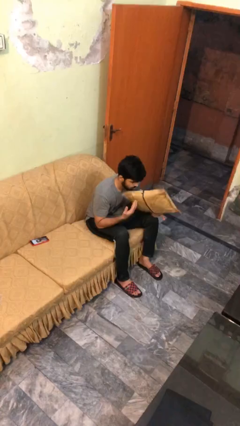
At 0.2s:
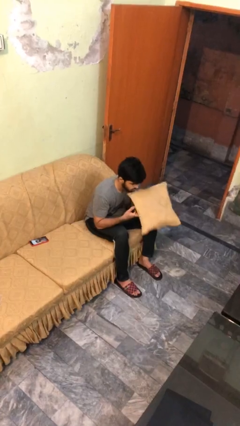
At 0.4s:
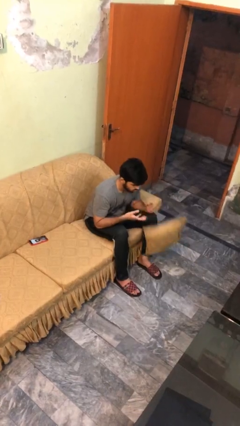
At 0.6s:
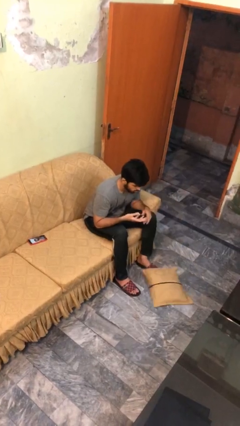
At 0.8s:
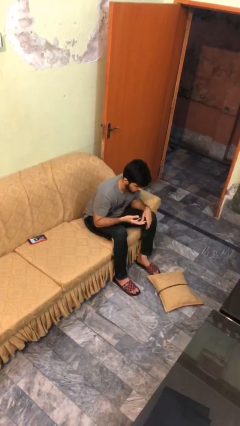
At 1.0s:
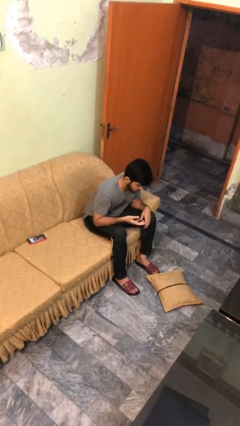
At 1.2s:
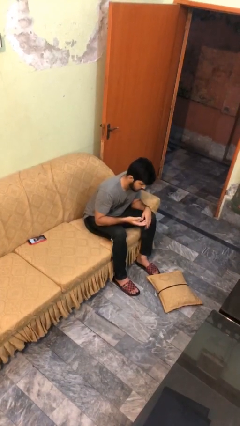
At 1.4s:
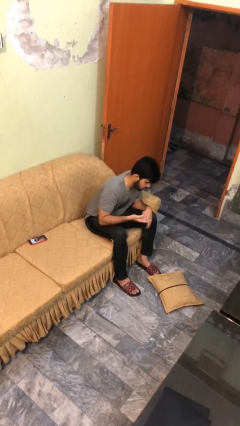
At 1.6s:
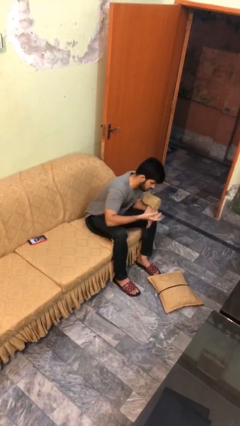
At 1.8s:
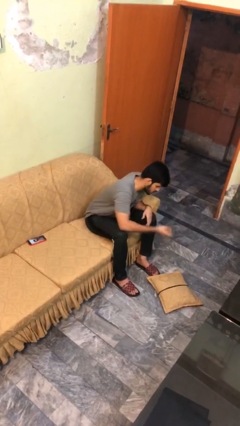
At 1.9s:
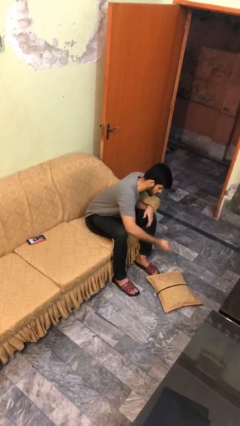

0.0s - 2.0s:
person drops object

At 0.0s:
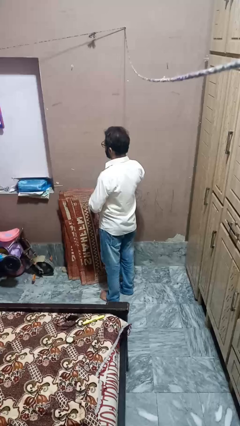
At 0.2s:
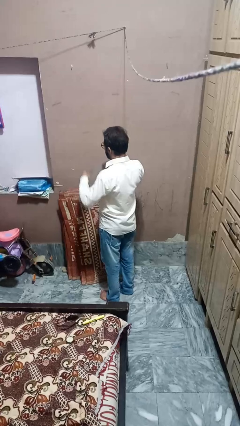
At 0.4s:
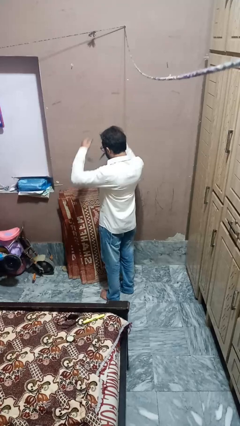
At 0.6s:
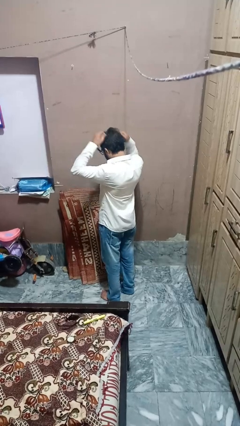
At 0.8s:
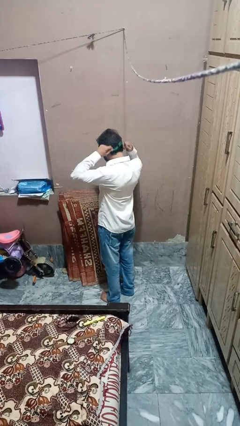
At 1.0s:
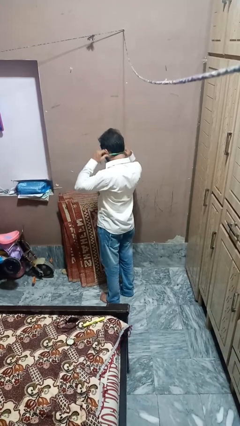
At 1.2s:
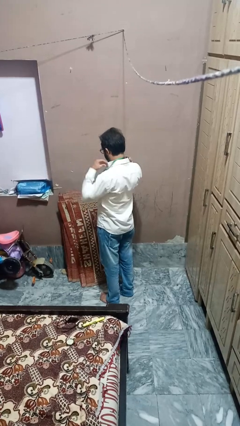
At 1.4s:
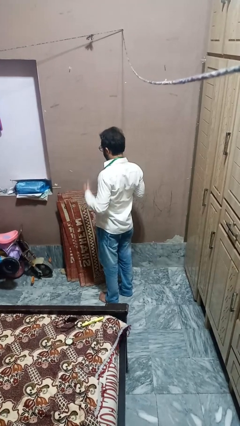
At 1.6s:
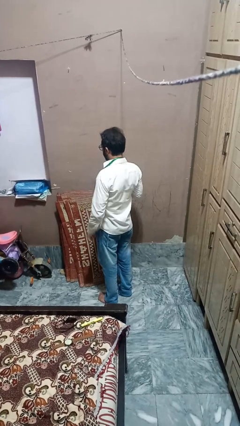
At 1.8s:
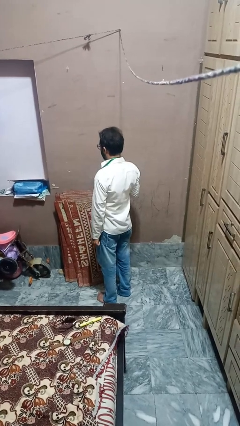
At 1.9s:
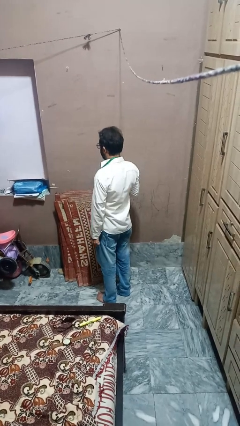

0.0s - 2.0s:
person puts on necklace

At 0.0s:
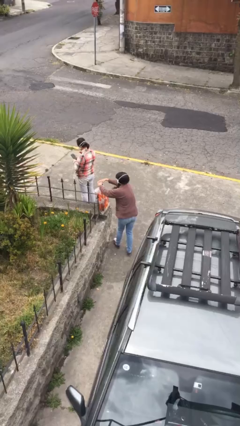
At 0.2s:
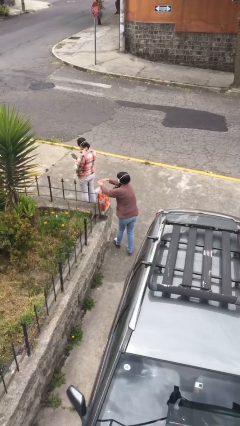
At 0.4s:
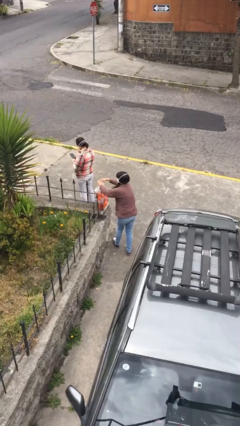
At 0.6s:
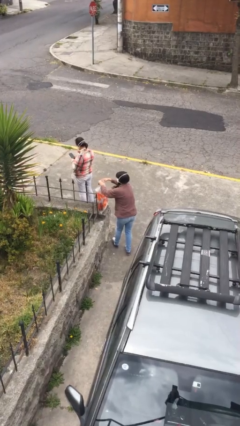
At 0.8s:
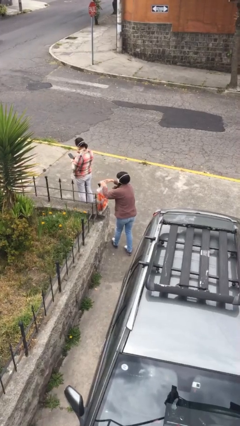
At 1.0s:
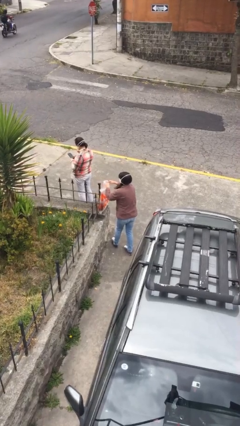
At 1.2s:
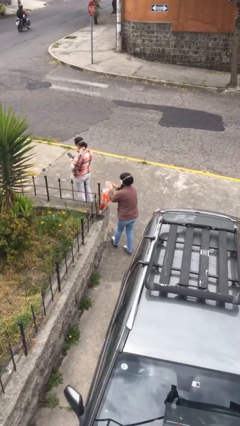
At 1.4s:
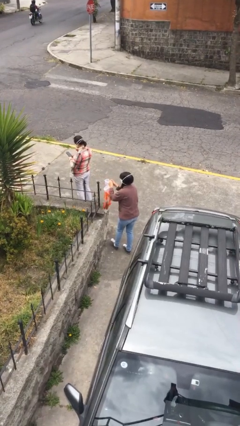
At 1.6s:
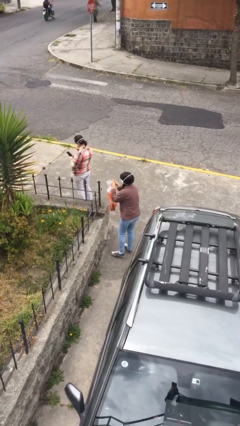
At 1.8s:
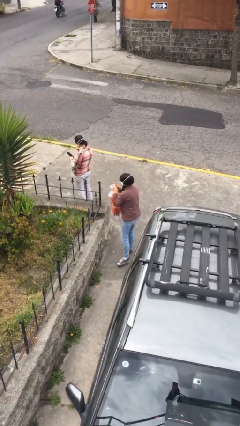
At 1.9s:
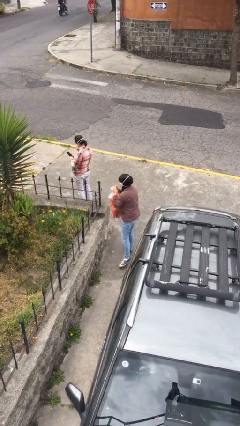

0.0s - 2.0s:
person steals object from person

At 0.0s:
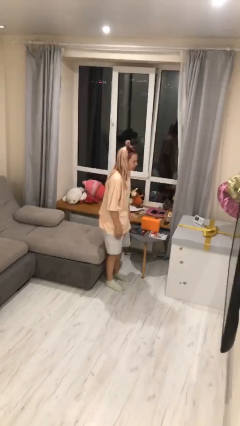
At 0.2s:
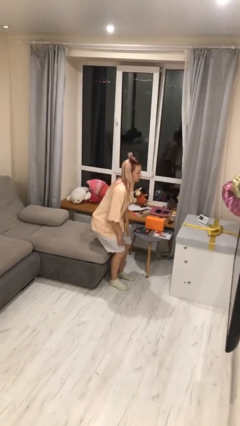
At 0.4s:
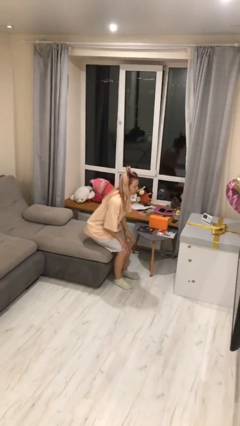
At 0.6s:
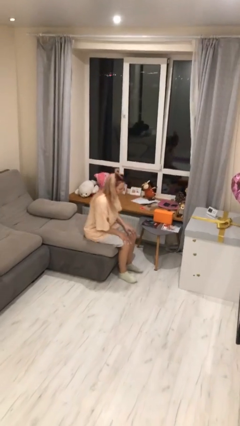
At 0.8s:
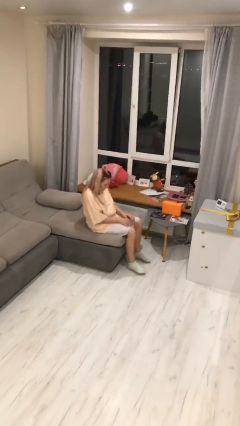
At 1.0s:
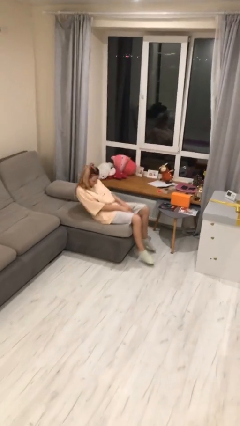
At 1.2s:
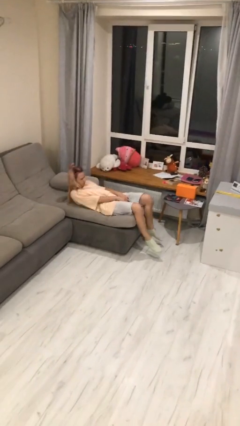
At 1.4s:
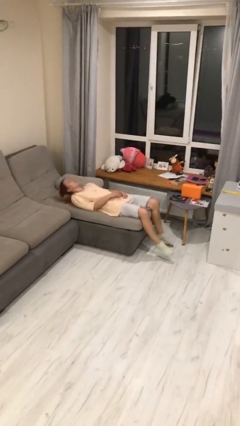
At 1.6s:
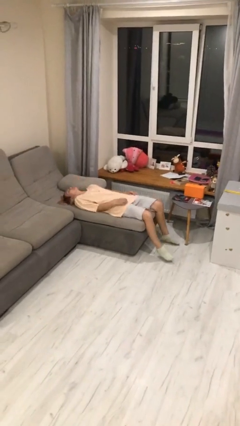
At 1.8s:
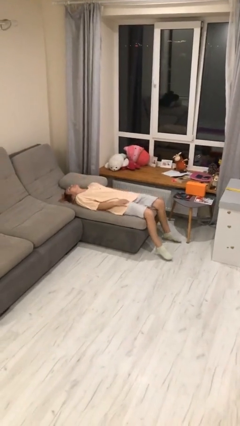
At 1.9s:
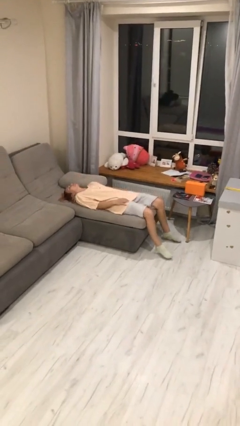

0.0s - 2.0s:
person lies down on couch

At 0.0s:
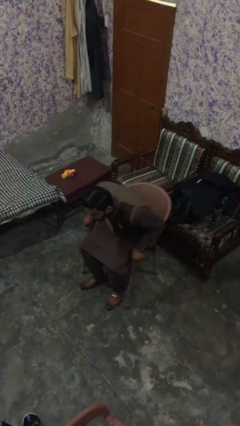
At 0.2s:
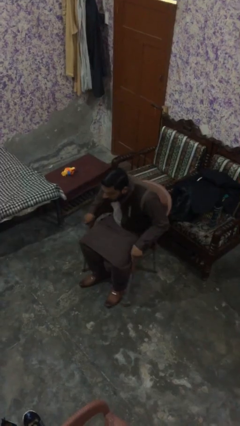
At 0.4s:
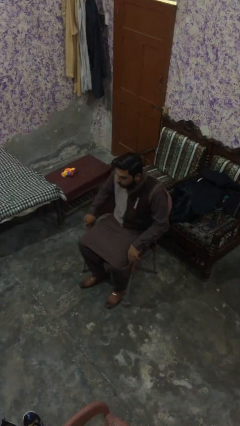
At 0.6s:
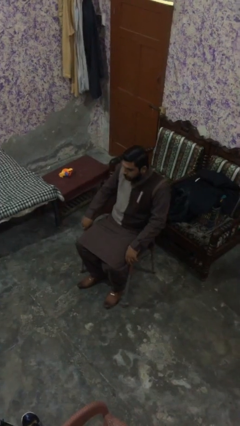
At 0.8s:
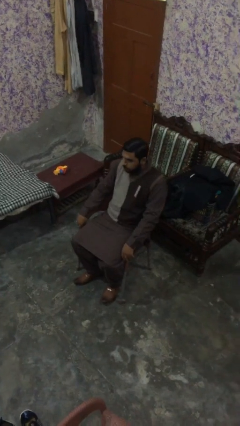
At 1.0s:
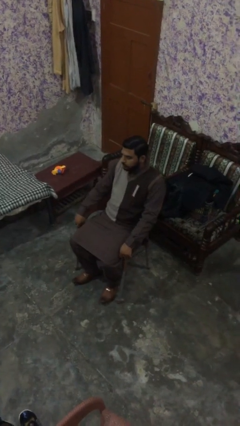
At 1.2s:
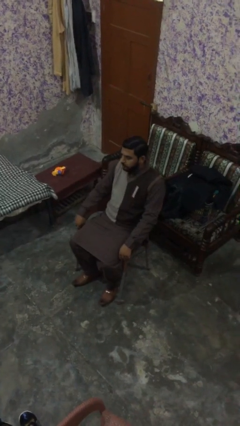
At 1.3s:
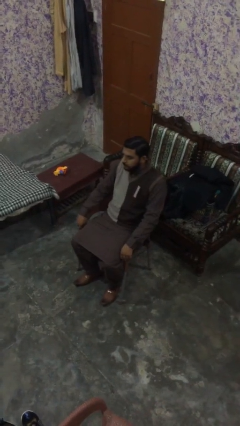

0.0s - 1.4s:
person sits down

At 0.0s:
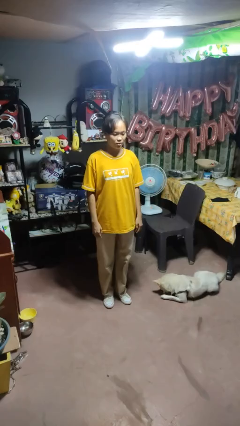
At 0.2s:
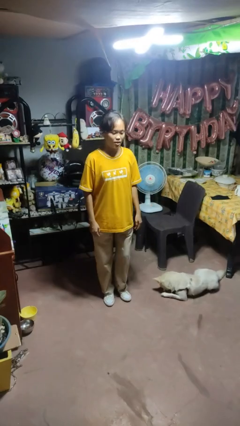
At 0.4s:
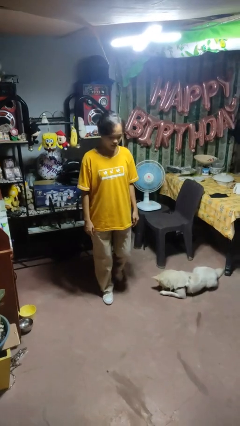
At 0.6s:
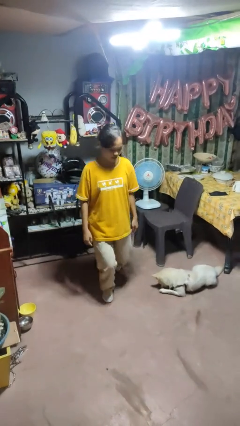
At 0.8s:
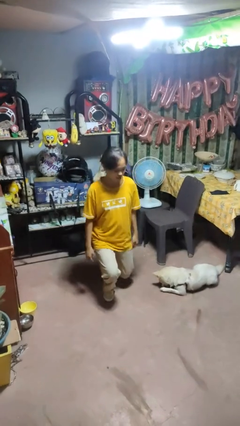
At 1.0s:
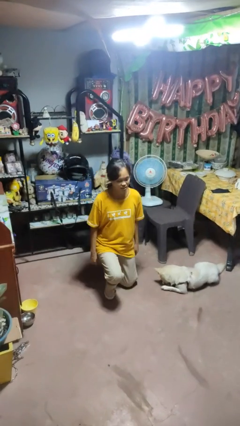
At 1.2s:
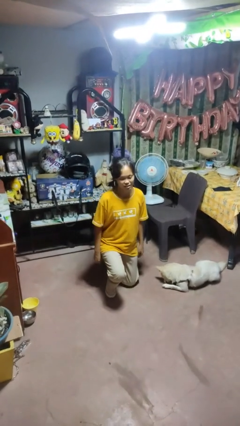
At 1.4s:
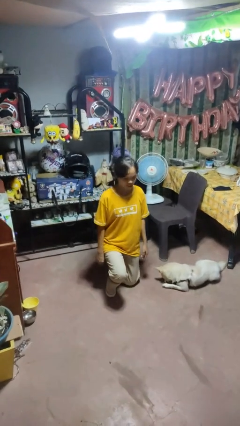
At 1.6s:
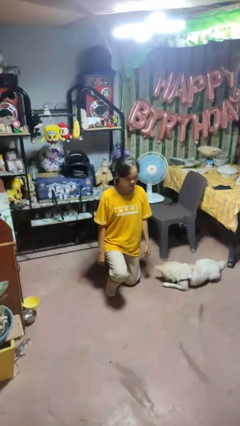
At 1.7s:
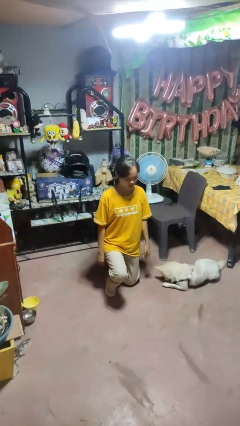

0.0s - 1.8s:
person kneels

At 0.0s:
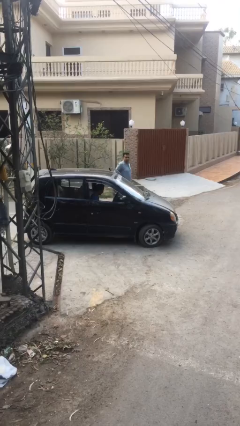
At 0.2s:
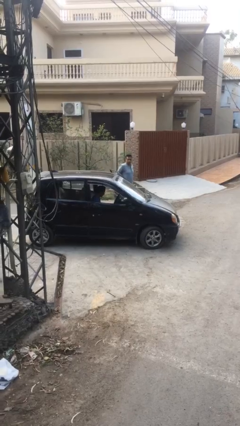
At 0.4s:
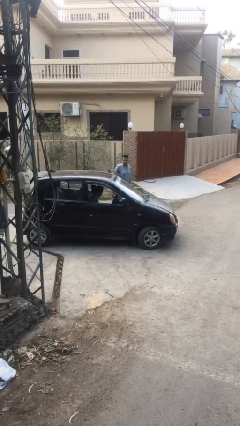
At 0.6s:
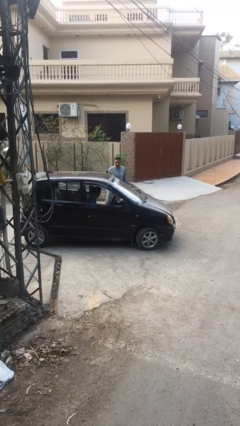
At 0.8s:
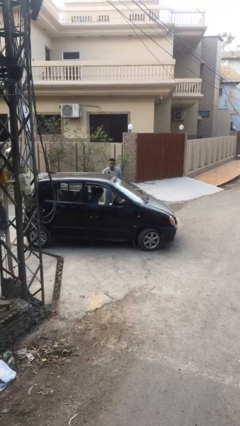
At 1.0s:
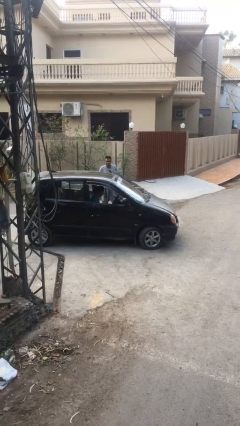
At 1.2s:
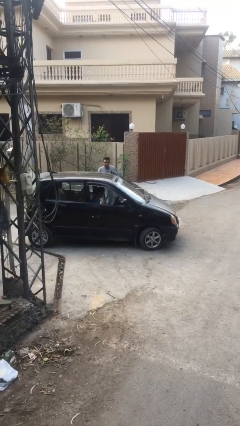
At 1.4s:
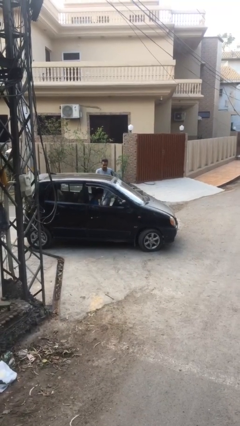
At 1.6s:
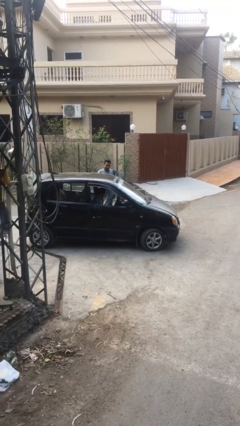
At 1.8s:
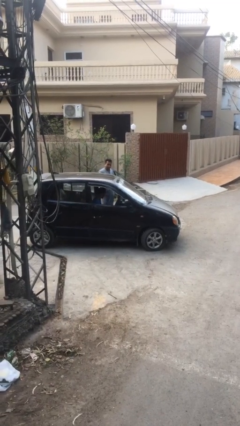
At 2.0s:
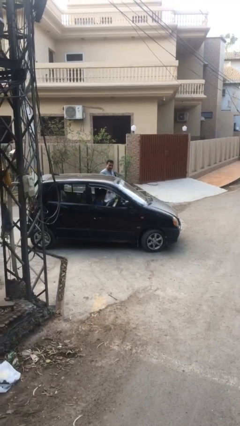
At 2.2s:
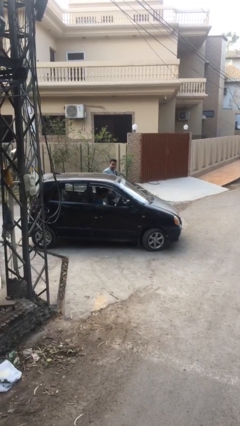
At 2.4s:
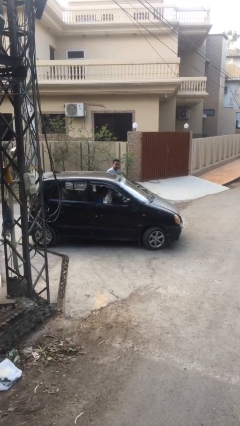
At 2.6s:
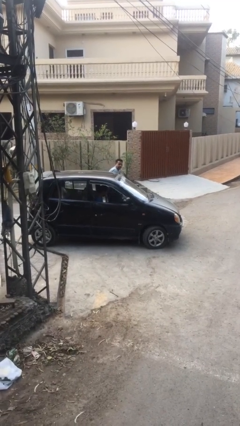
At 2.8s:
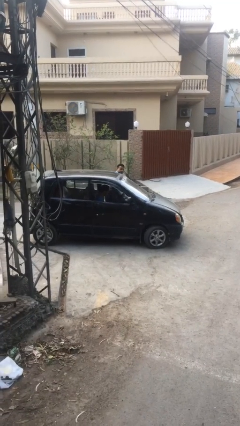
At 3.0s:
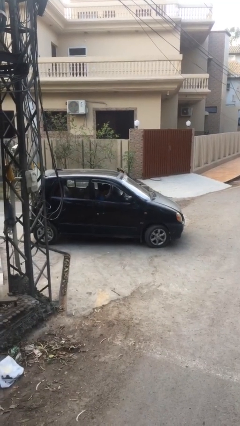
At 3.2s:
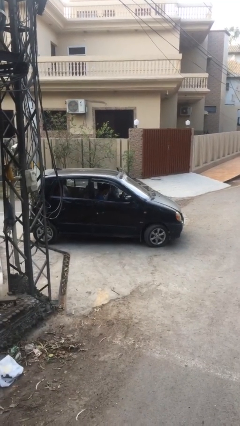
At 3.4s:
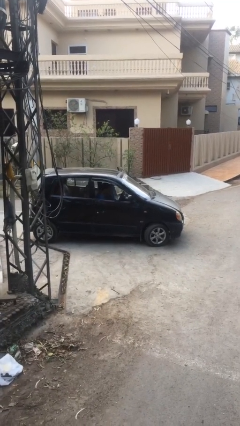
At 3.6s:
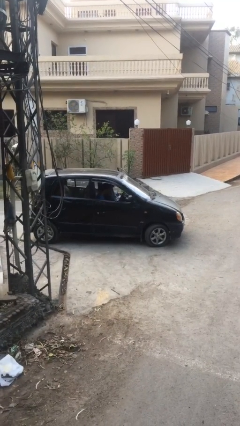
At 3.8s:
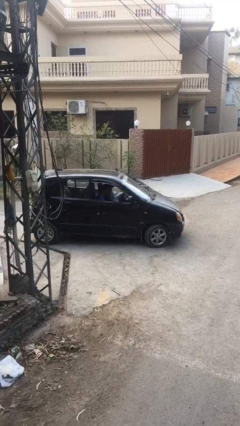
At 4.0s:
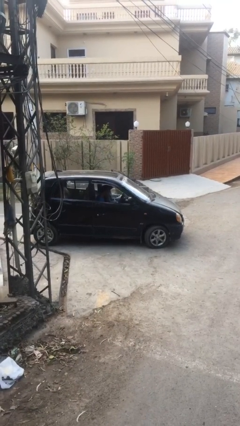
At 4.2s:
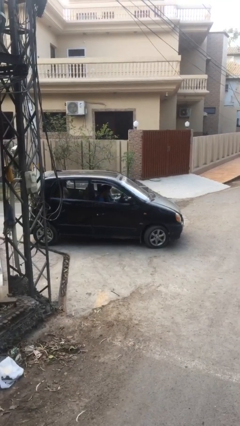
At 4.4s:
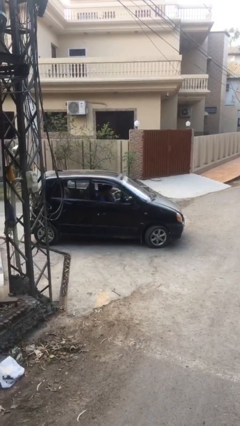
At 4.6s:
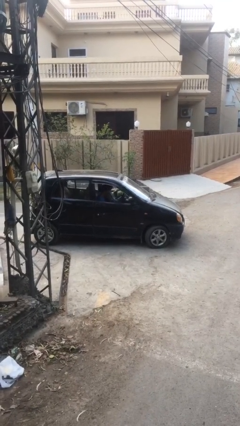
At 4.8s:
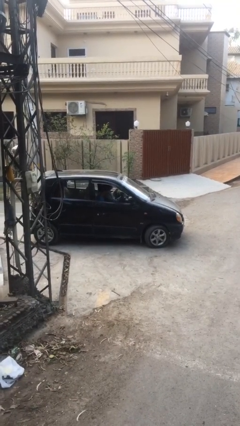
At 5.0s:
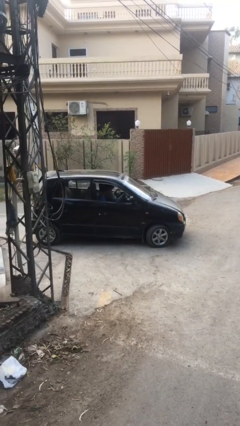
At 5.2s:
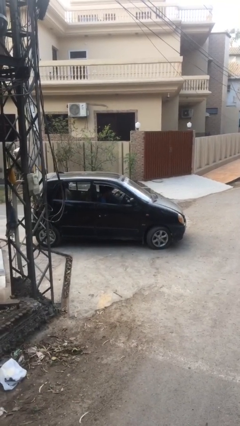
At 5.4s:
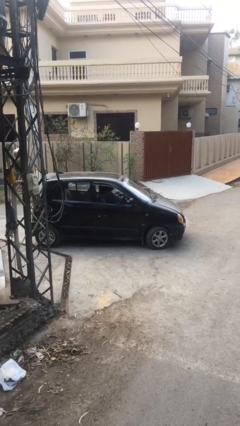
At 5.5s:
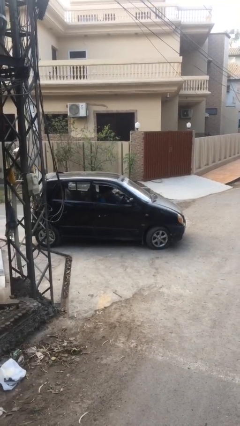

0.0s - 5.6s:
car picks up person

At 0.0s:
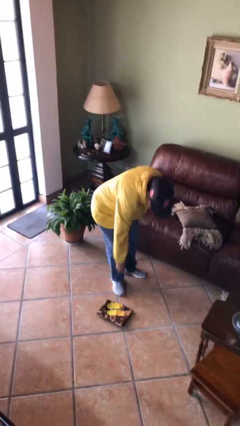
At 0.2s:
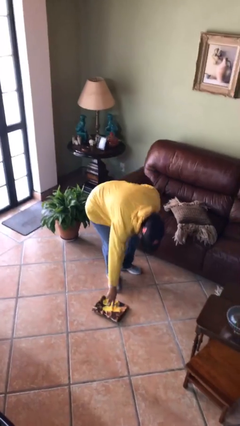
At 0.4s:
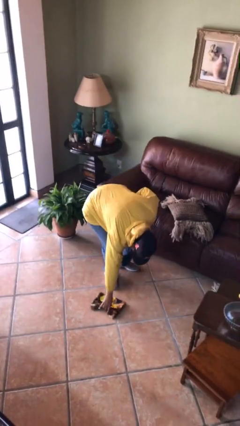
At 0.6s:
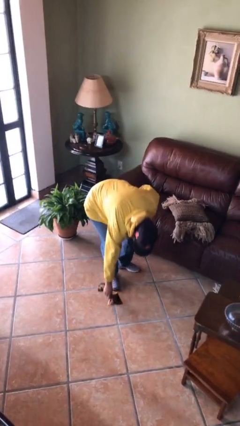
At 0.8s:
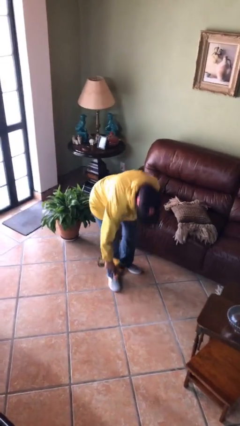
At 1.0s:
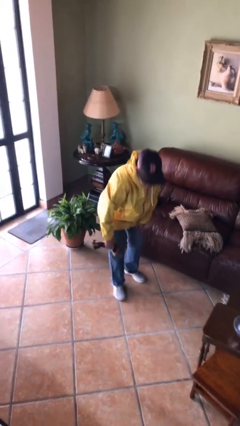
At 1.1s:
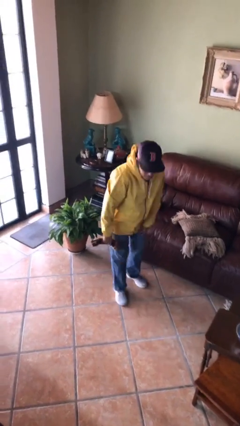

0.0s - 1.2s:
person picks up object from floor
